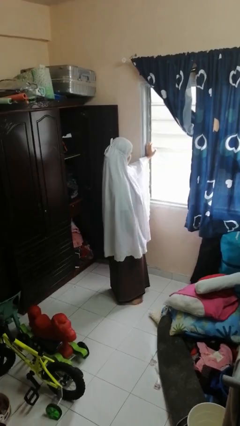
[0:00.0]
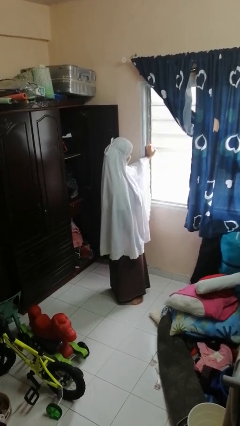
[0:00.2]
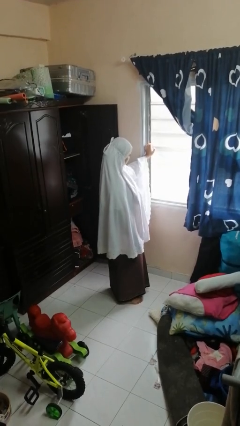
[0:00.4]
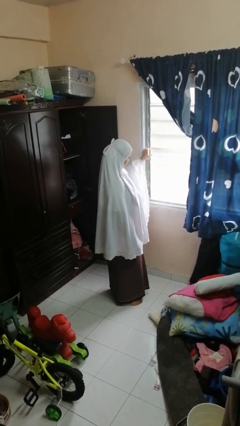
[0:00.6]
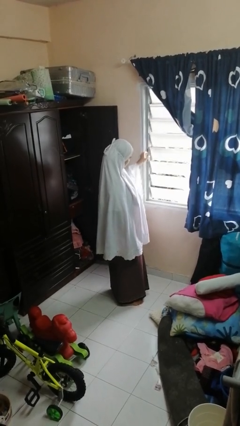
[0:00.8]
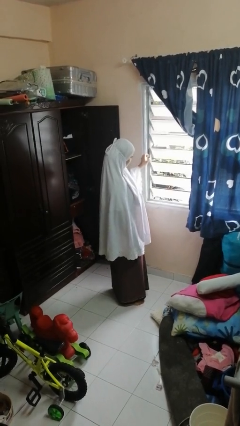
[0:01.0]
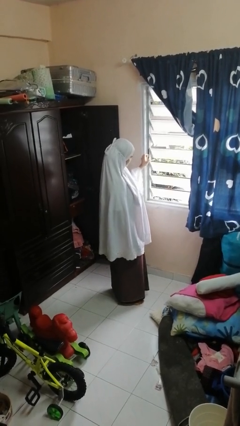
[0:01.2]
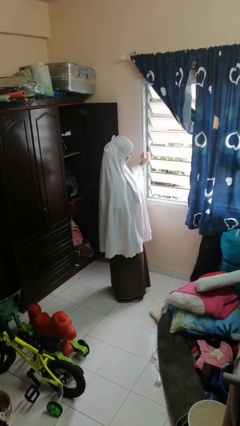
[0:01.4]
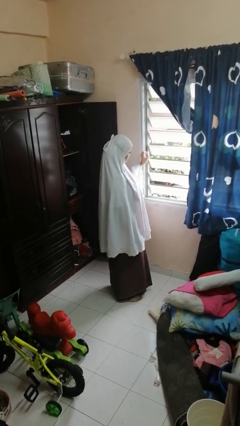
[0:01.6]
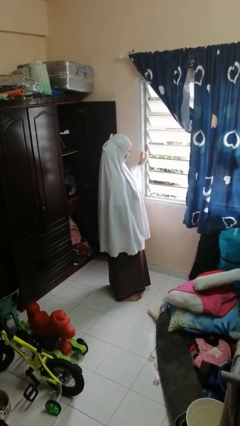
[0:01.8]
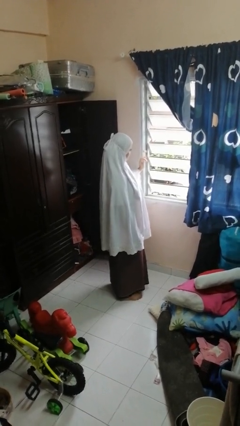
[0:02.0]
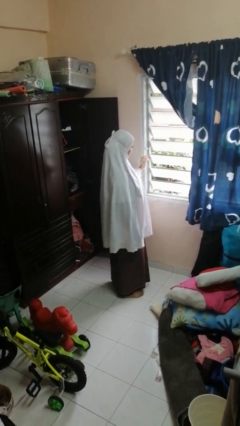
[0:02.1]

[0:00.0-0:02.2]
person opens home window

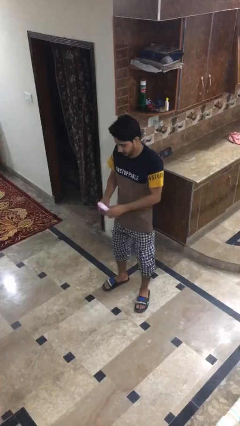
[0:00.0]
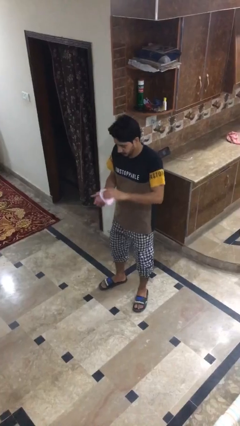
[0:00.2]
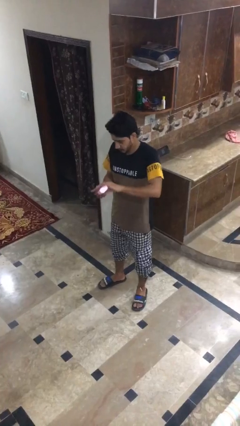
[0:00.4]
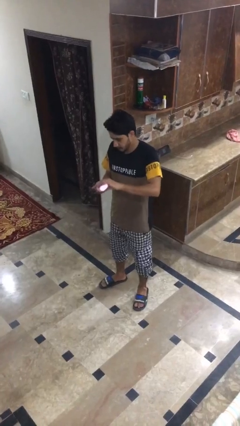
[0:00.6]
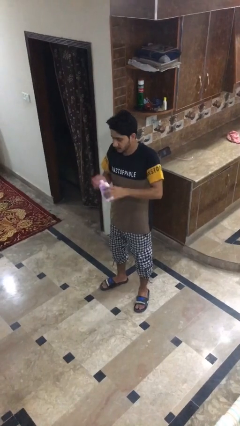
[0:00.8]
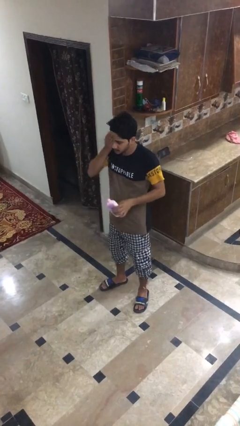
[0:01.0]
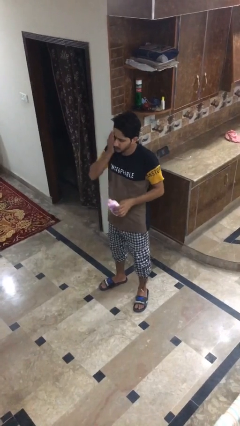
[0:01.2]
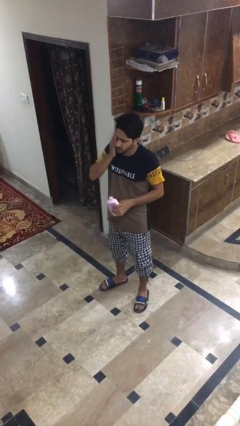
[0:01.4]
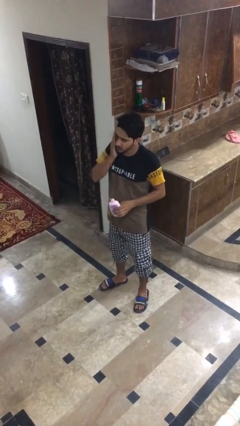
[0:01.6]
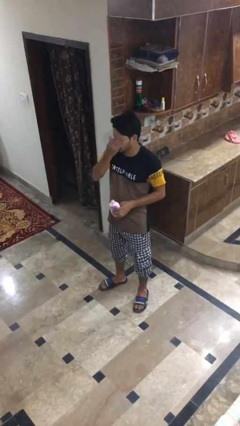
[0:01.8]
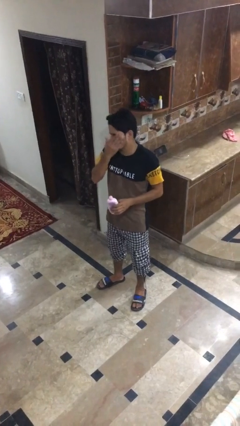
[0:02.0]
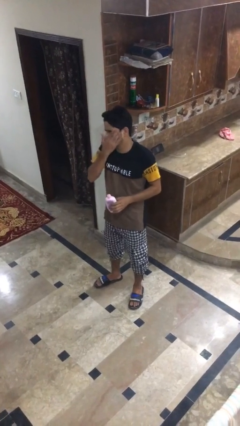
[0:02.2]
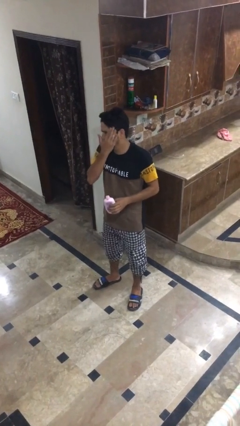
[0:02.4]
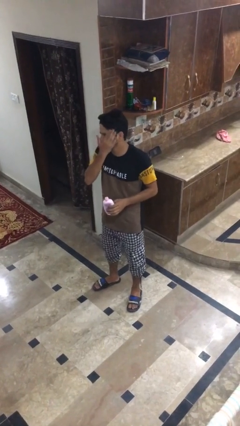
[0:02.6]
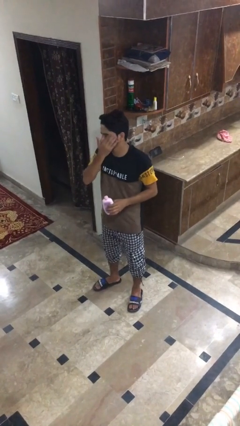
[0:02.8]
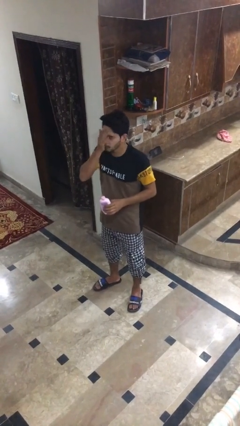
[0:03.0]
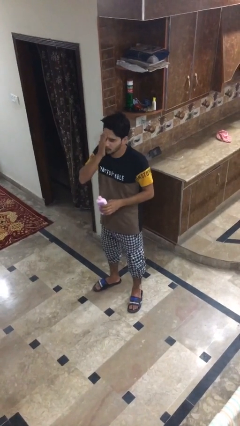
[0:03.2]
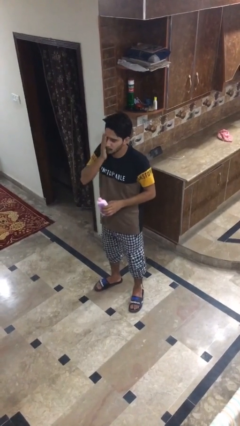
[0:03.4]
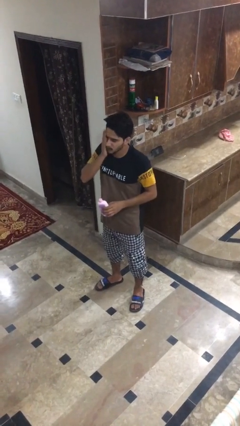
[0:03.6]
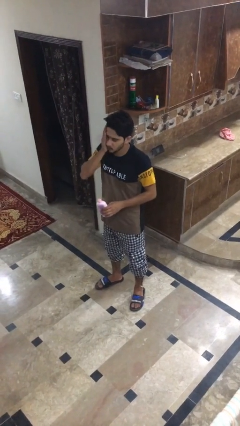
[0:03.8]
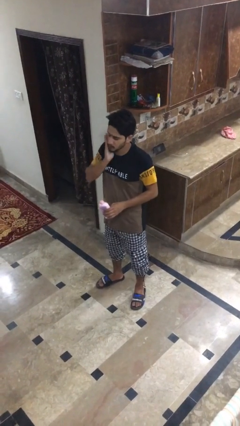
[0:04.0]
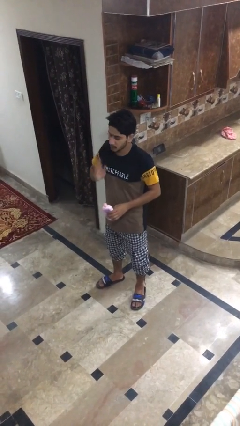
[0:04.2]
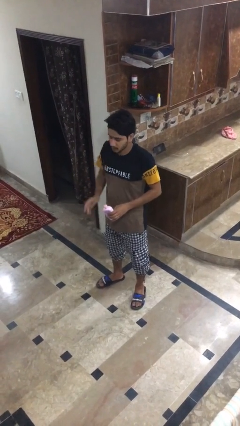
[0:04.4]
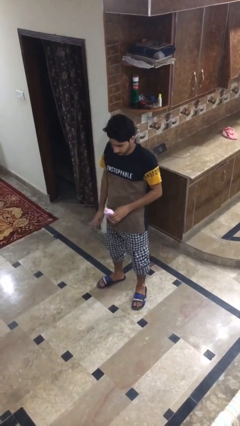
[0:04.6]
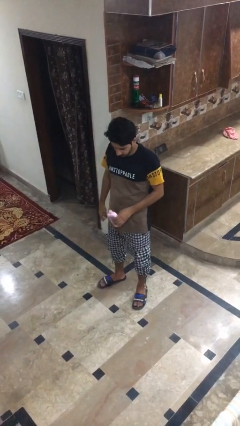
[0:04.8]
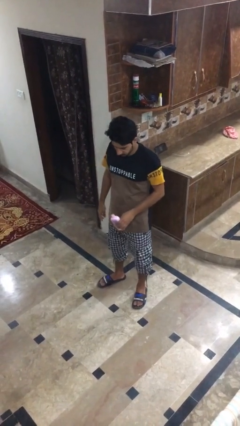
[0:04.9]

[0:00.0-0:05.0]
person applies facial moisturizer

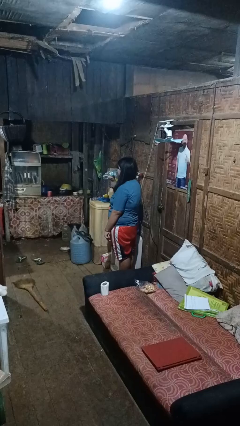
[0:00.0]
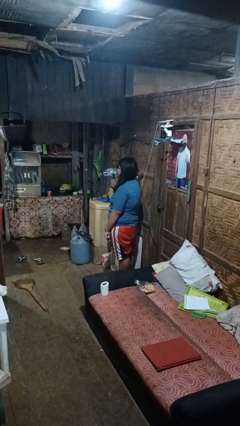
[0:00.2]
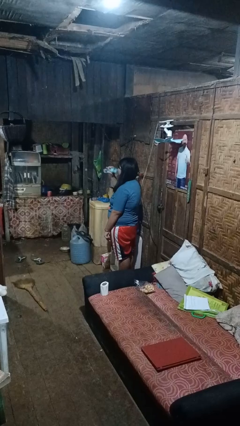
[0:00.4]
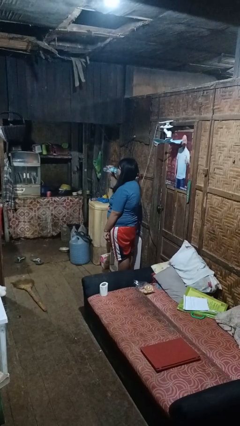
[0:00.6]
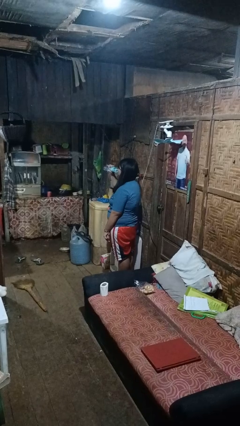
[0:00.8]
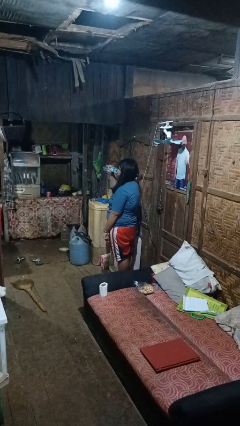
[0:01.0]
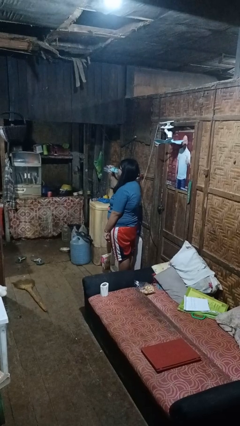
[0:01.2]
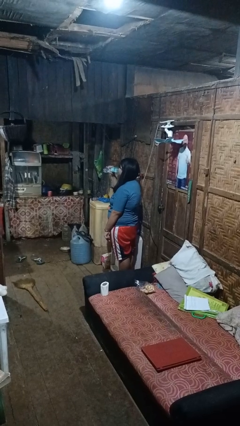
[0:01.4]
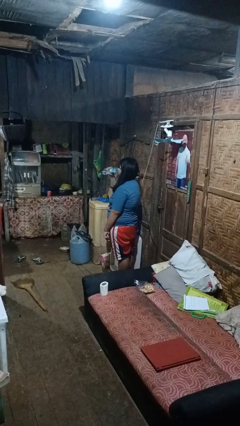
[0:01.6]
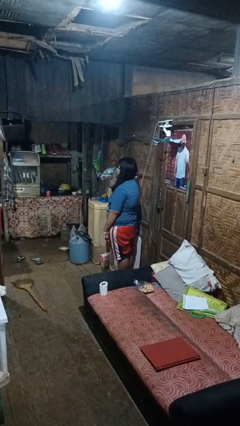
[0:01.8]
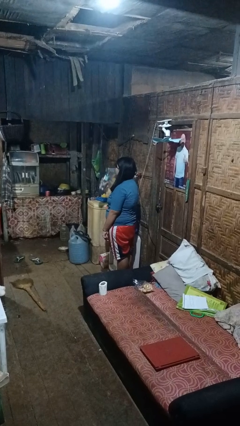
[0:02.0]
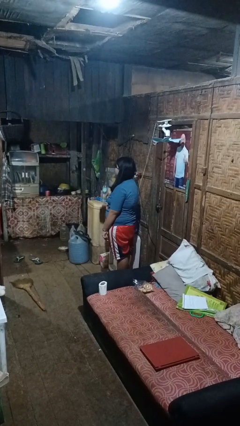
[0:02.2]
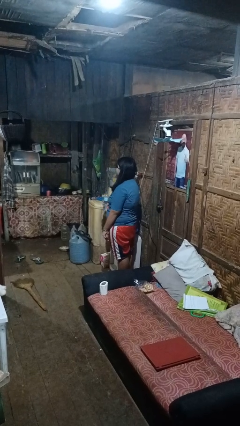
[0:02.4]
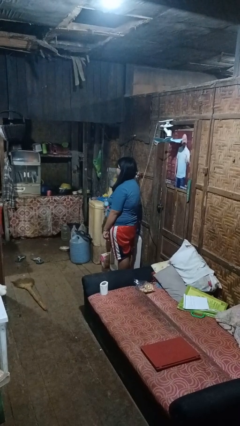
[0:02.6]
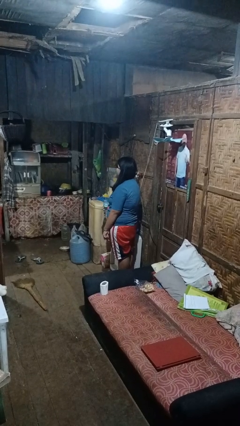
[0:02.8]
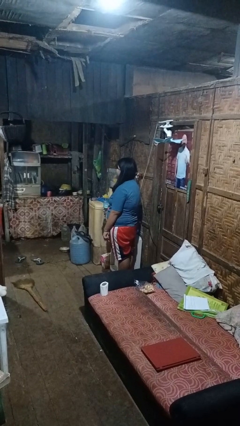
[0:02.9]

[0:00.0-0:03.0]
person drinks from bottle

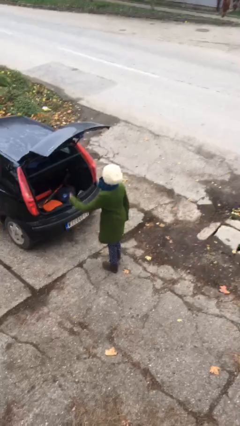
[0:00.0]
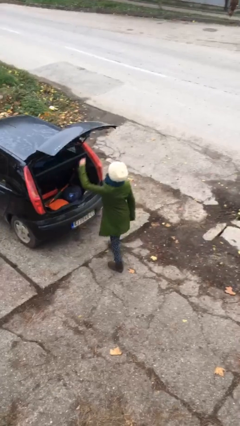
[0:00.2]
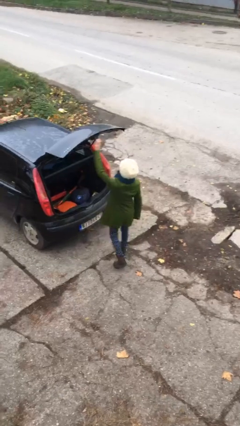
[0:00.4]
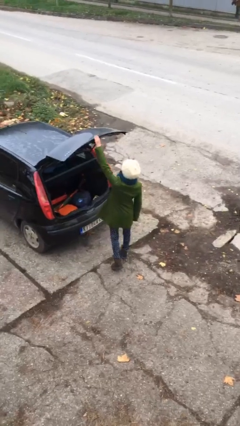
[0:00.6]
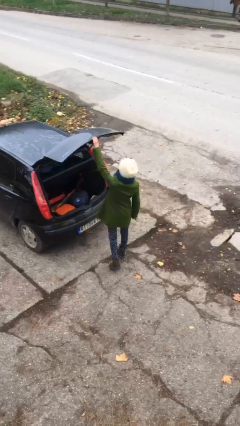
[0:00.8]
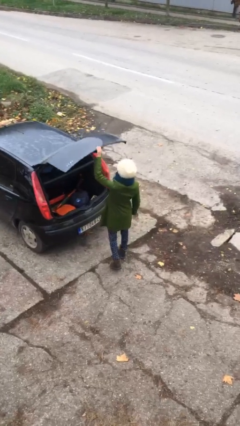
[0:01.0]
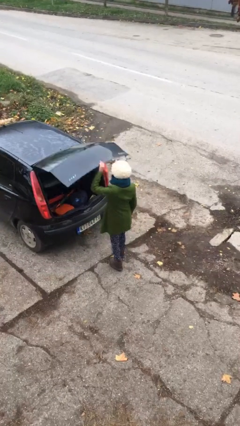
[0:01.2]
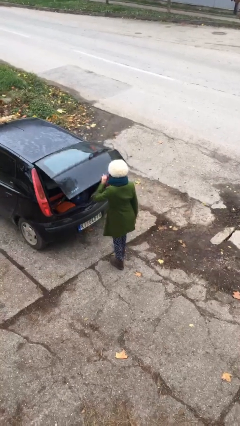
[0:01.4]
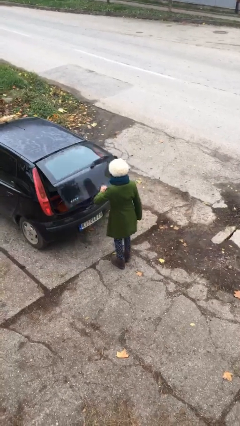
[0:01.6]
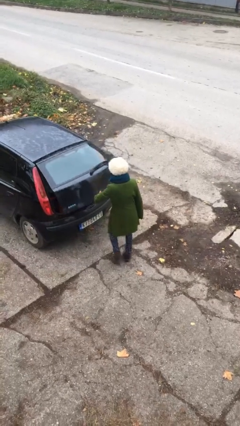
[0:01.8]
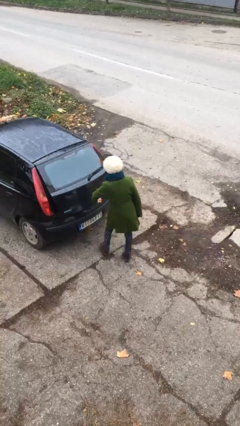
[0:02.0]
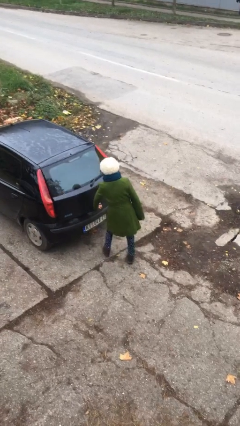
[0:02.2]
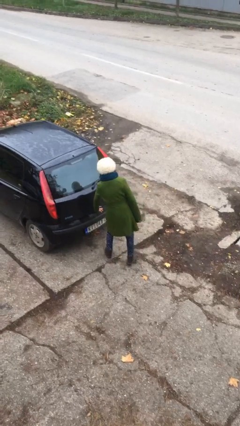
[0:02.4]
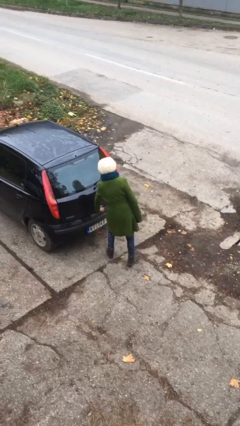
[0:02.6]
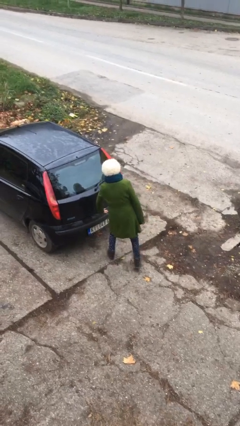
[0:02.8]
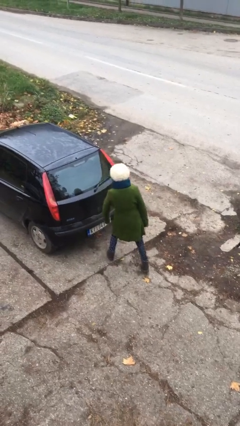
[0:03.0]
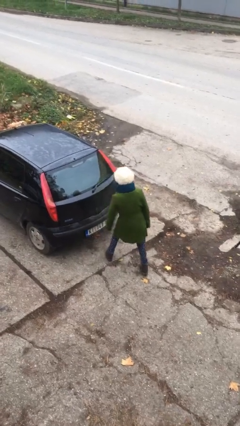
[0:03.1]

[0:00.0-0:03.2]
person closes car trunk

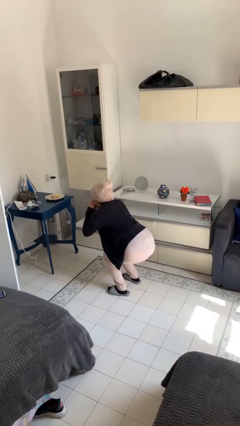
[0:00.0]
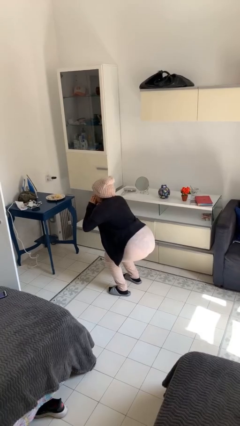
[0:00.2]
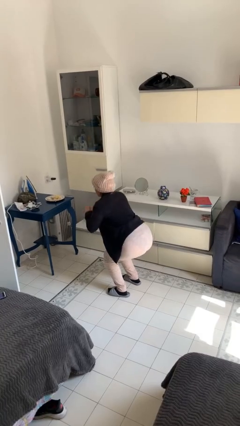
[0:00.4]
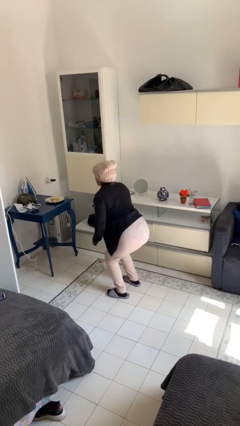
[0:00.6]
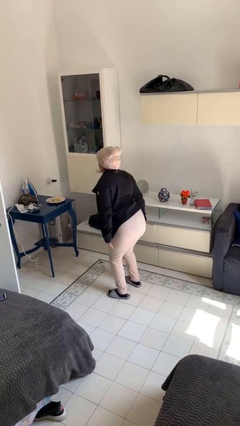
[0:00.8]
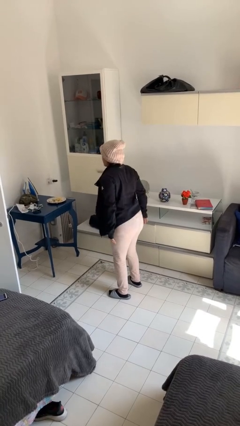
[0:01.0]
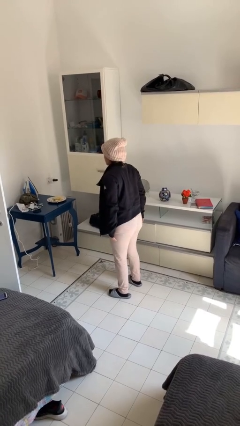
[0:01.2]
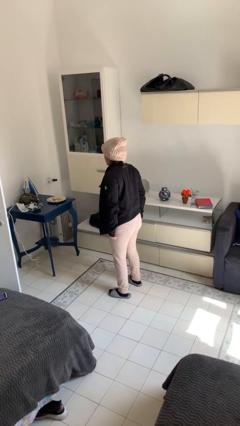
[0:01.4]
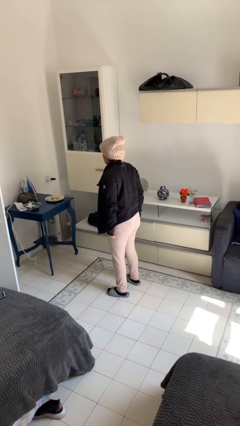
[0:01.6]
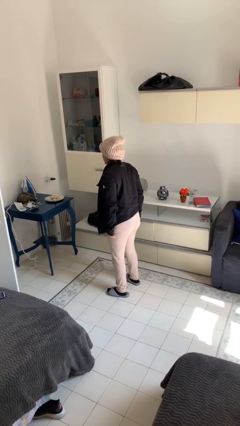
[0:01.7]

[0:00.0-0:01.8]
person stands up

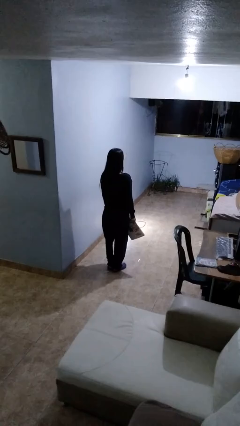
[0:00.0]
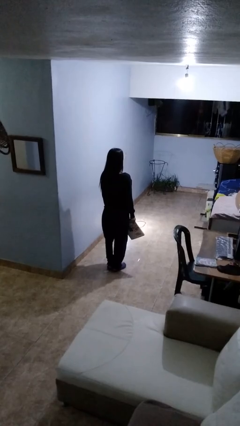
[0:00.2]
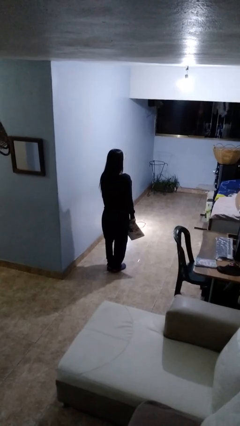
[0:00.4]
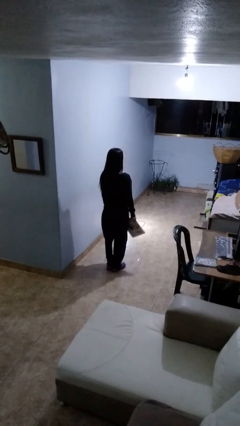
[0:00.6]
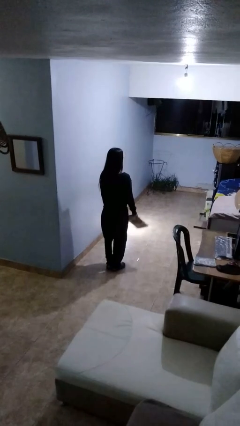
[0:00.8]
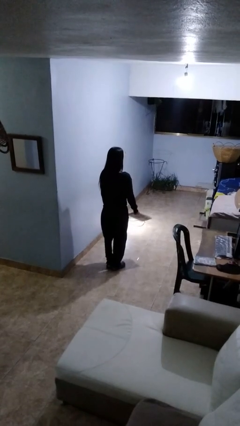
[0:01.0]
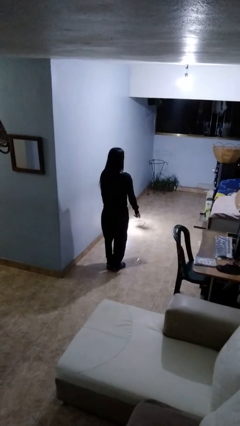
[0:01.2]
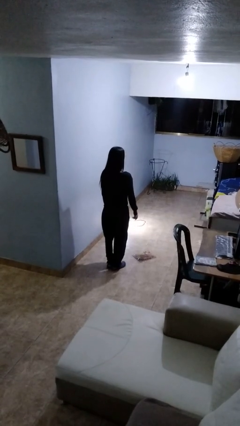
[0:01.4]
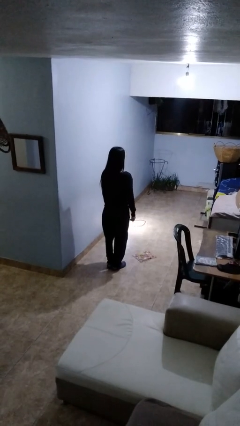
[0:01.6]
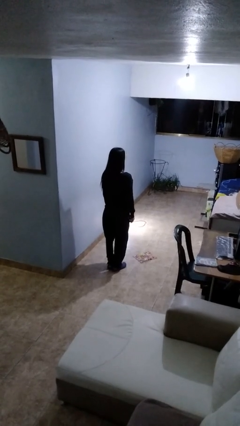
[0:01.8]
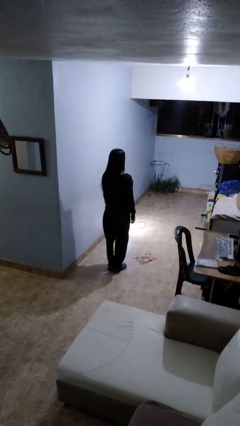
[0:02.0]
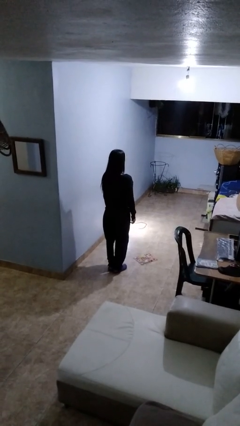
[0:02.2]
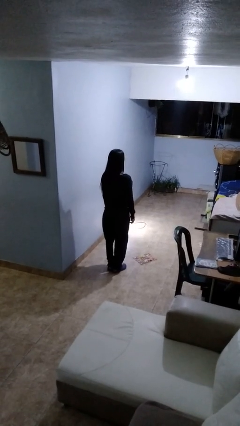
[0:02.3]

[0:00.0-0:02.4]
person throws object to ground
